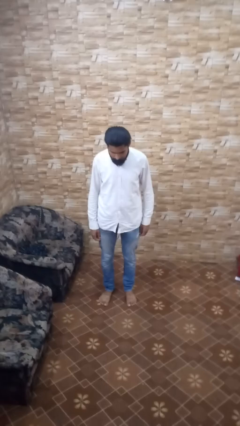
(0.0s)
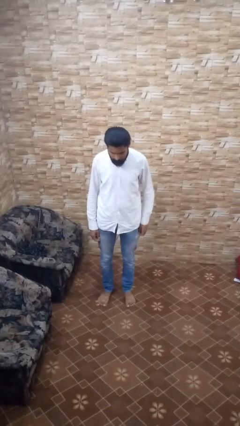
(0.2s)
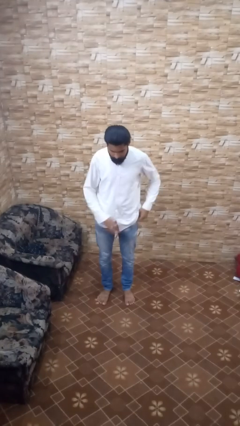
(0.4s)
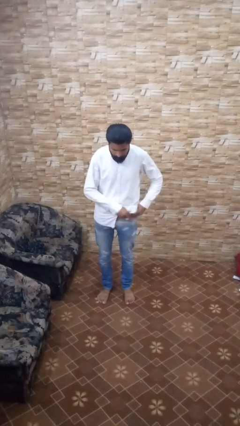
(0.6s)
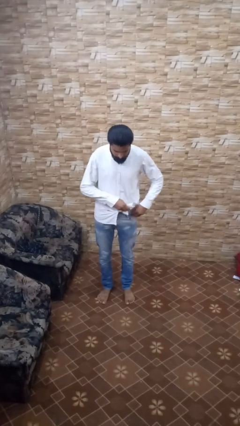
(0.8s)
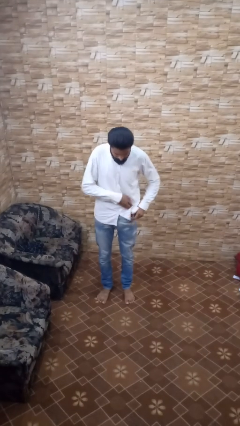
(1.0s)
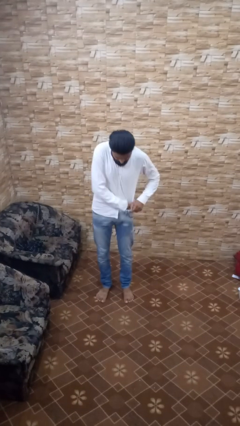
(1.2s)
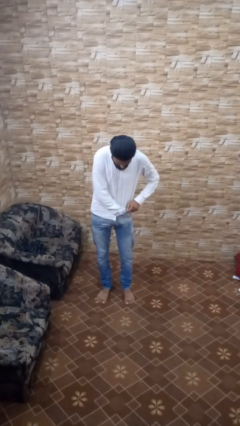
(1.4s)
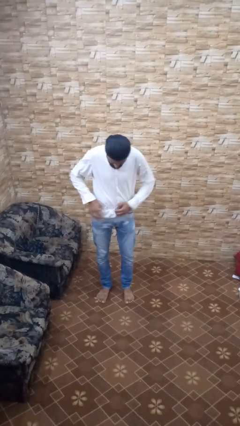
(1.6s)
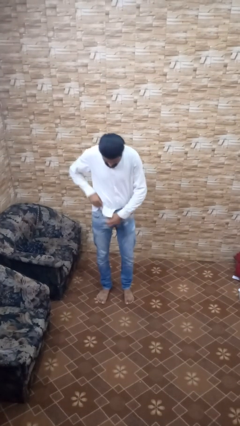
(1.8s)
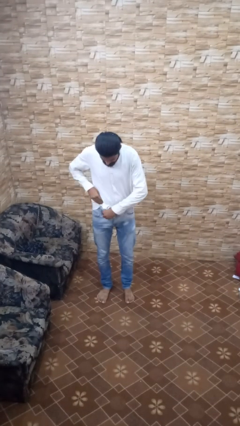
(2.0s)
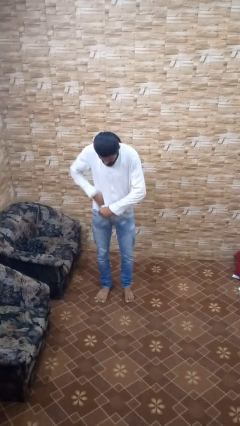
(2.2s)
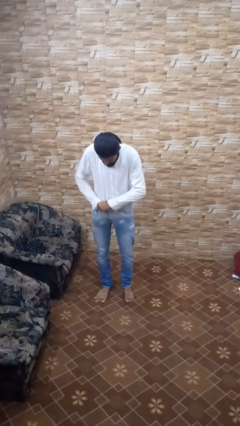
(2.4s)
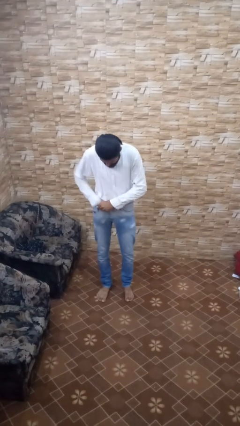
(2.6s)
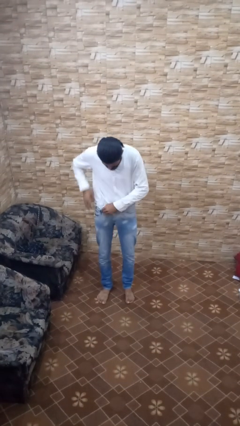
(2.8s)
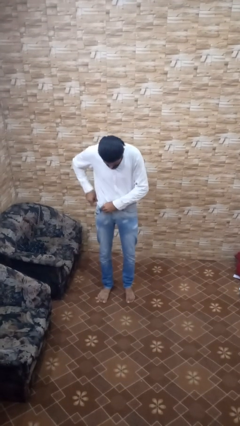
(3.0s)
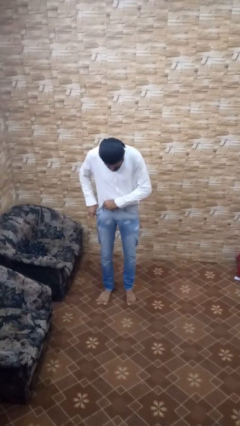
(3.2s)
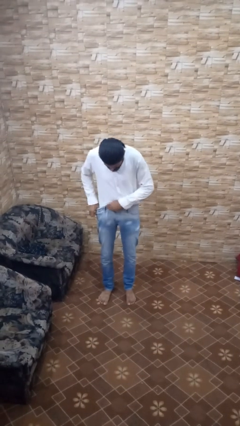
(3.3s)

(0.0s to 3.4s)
person tucks in shirt

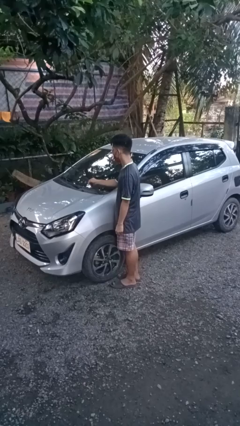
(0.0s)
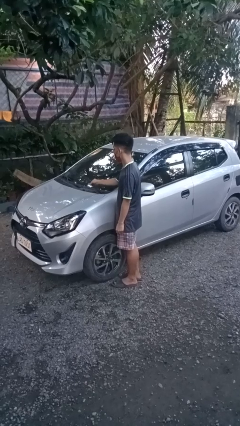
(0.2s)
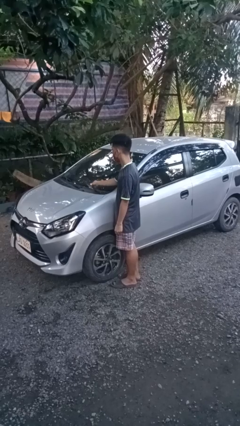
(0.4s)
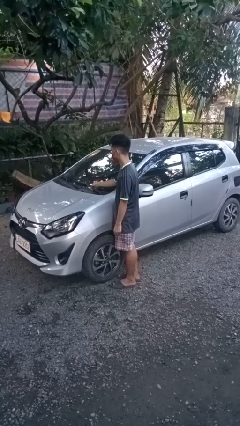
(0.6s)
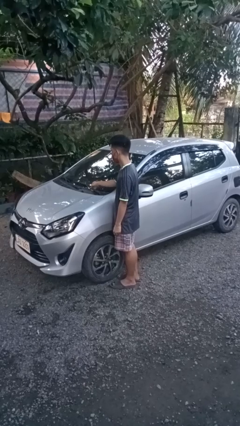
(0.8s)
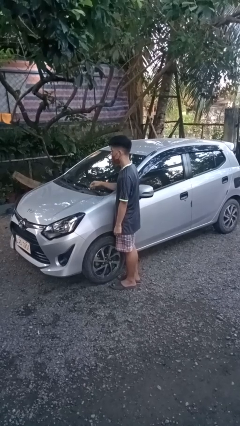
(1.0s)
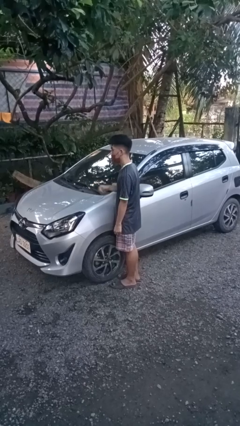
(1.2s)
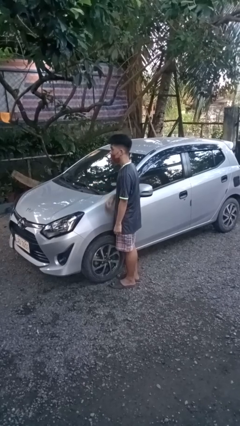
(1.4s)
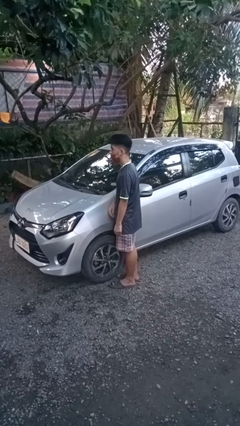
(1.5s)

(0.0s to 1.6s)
person flips down car wipers

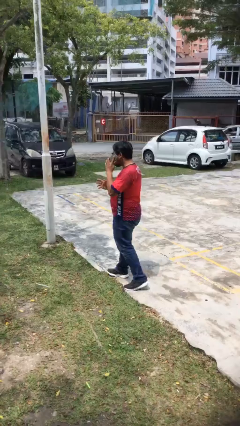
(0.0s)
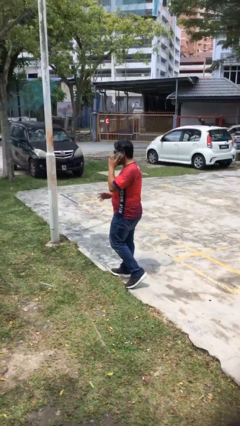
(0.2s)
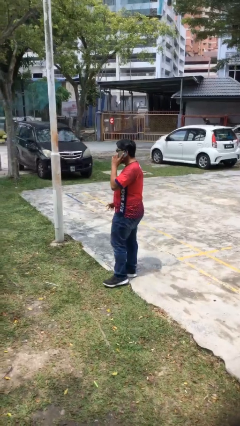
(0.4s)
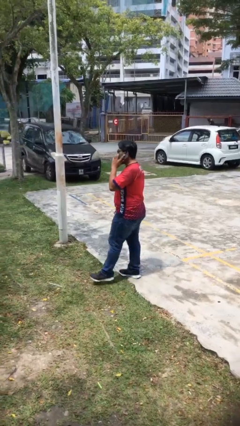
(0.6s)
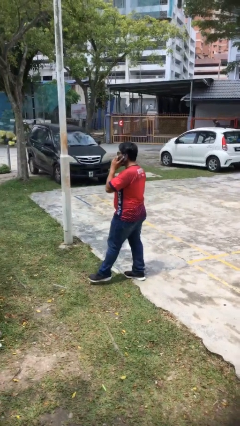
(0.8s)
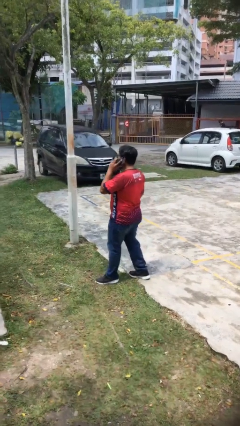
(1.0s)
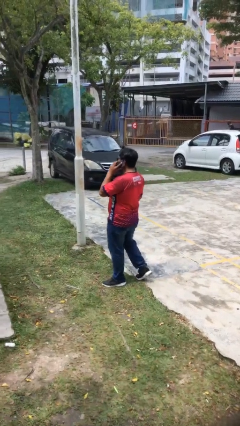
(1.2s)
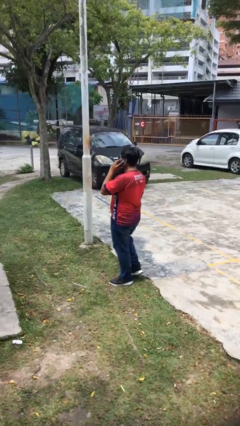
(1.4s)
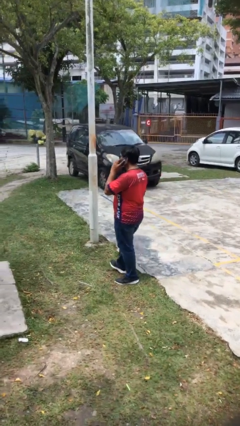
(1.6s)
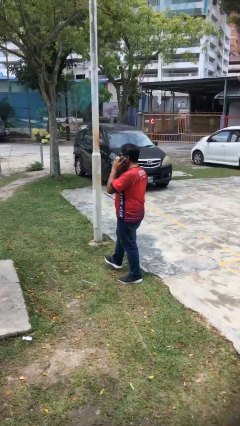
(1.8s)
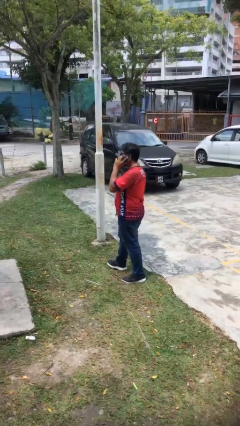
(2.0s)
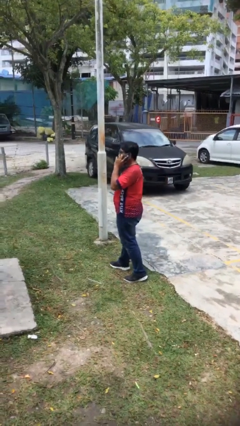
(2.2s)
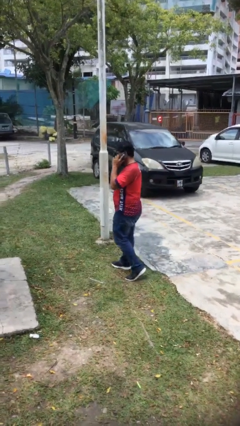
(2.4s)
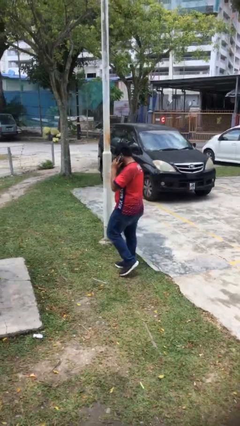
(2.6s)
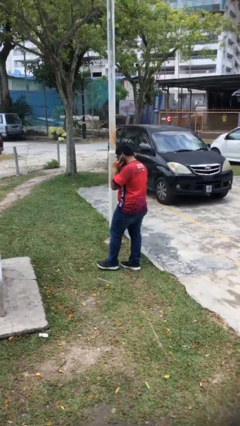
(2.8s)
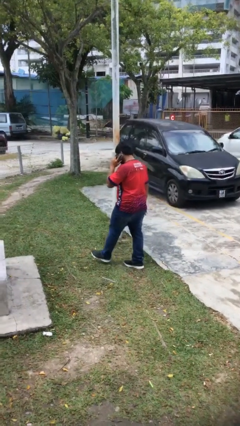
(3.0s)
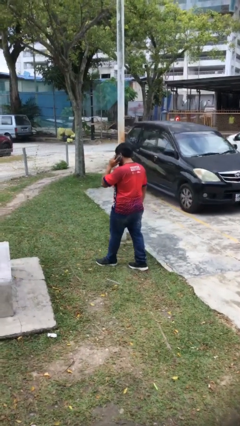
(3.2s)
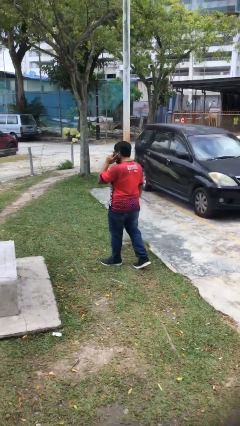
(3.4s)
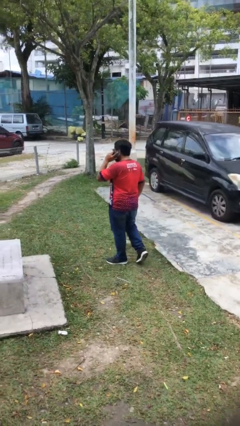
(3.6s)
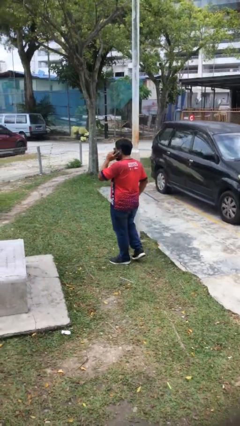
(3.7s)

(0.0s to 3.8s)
person talks on phone

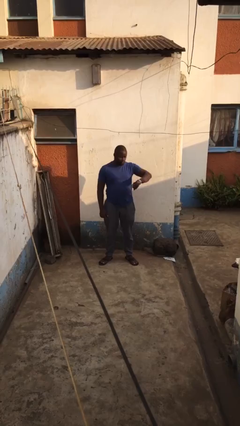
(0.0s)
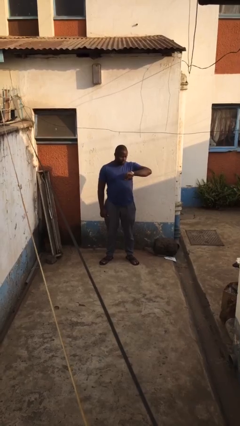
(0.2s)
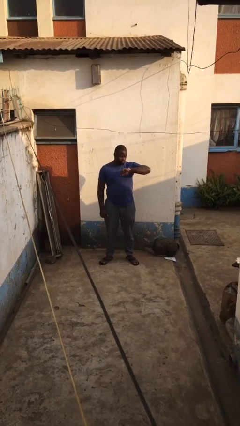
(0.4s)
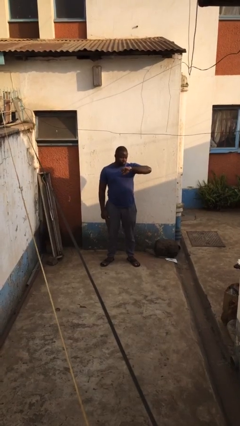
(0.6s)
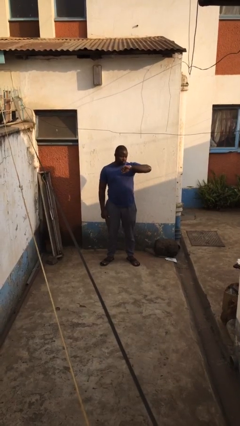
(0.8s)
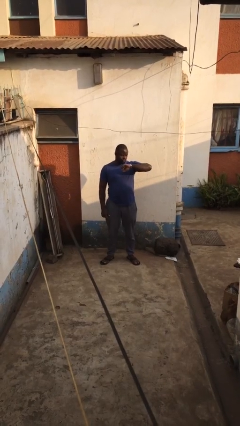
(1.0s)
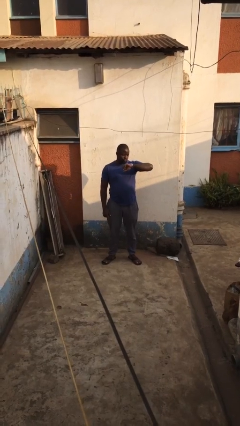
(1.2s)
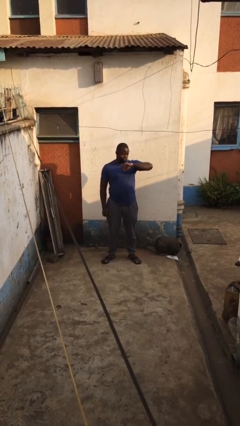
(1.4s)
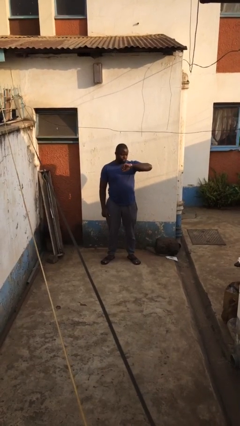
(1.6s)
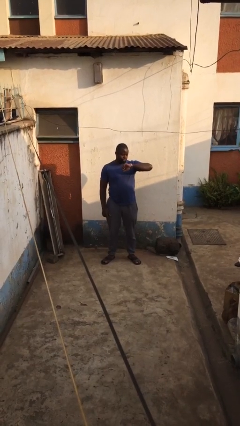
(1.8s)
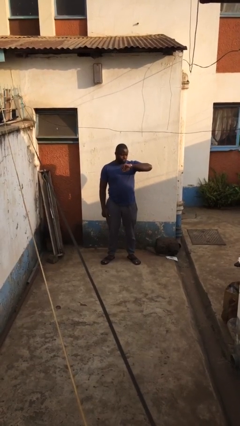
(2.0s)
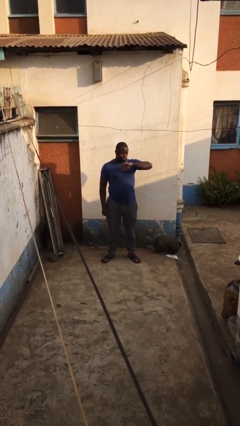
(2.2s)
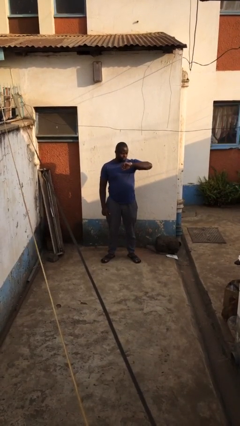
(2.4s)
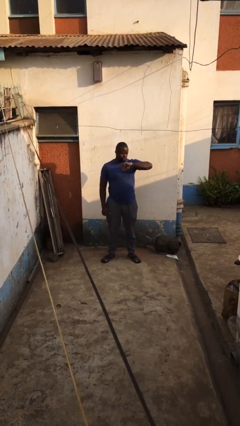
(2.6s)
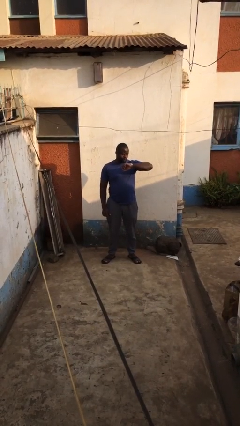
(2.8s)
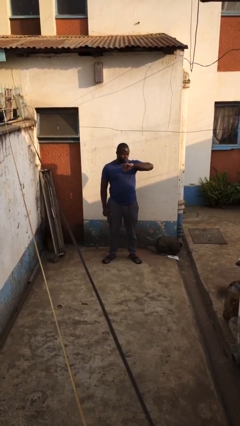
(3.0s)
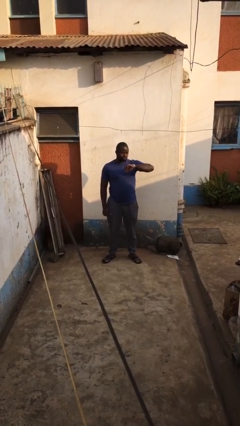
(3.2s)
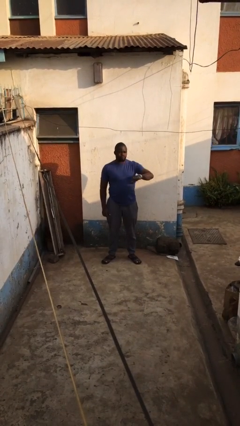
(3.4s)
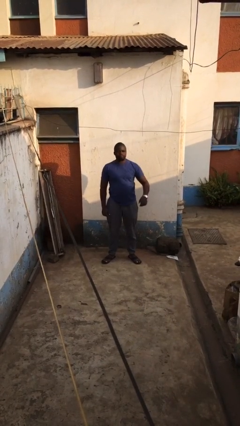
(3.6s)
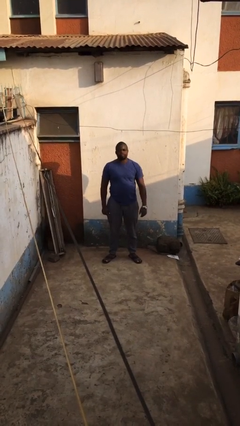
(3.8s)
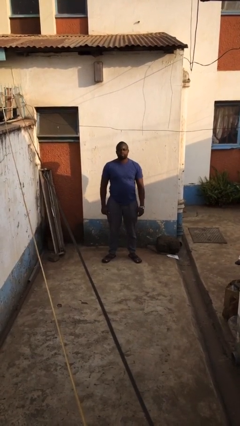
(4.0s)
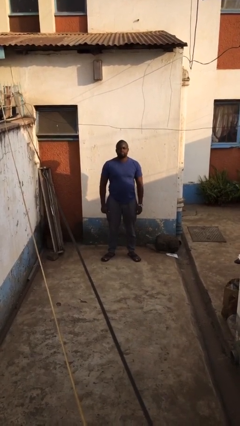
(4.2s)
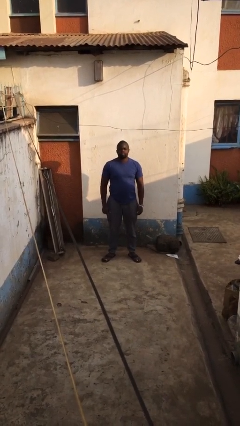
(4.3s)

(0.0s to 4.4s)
person looks at wristwatch

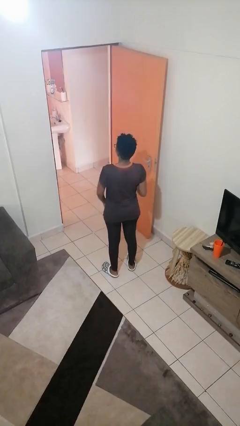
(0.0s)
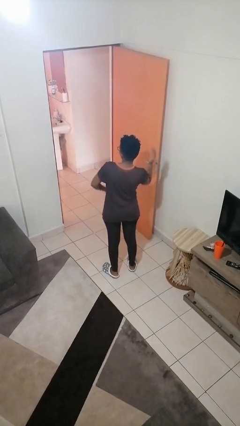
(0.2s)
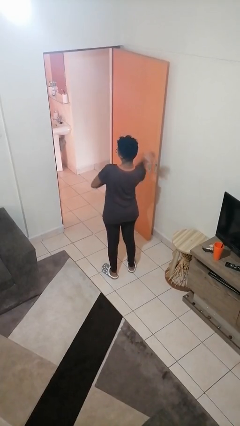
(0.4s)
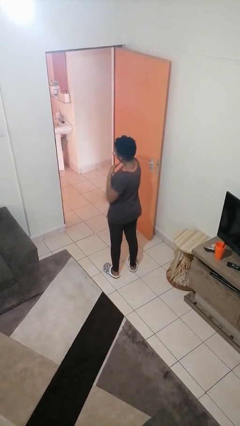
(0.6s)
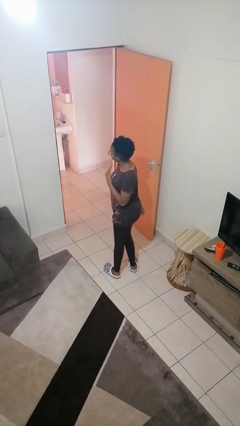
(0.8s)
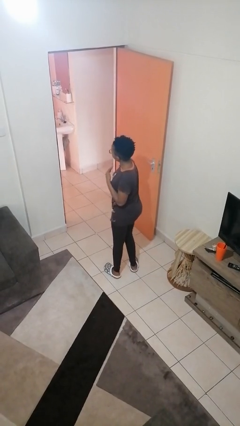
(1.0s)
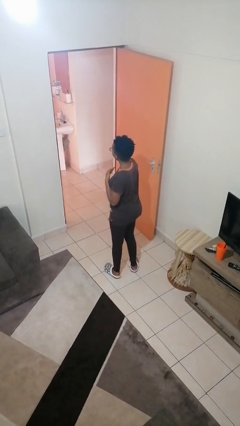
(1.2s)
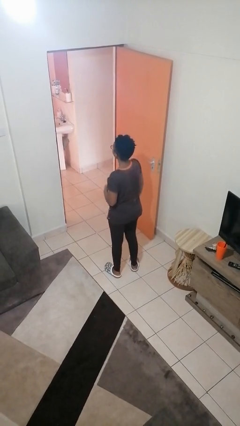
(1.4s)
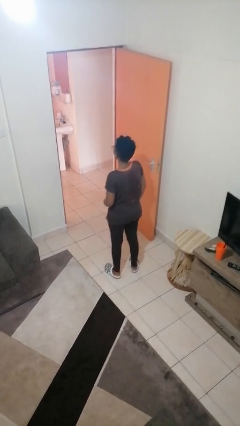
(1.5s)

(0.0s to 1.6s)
person karate chop

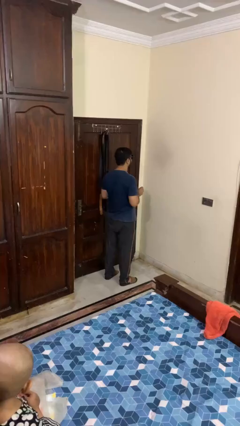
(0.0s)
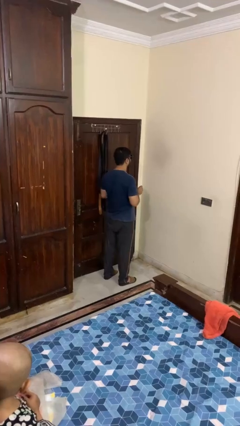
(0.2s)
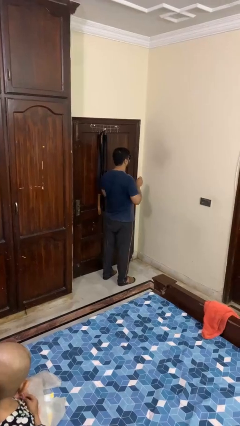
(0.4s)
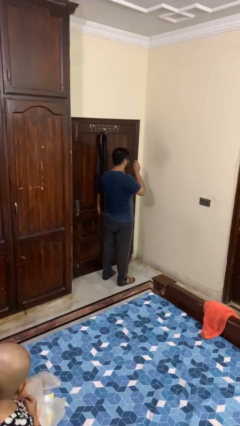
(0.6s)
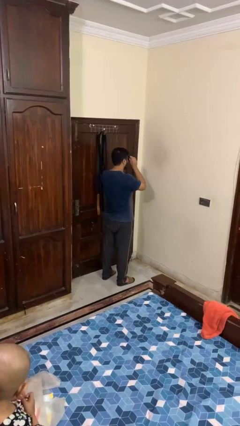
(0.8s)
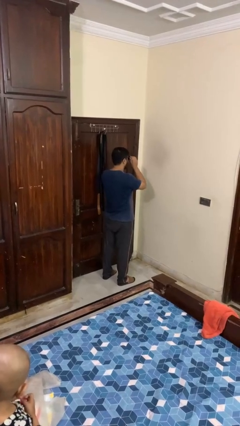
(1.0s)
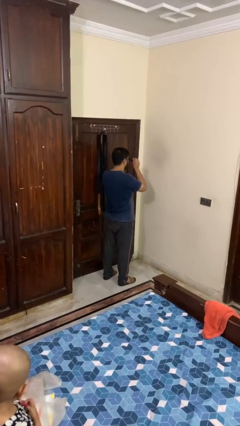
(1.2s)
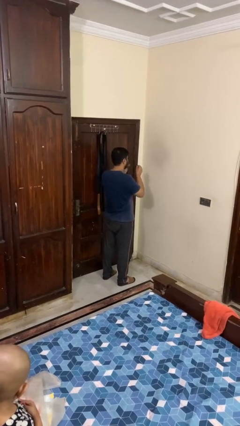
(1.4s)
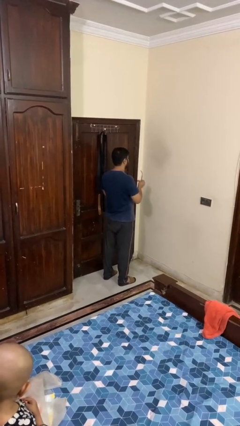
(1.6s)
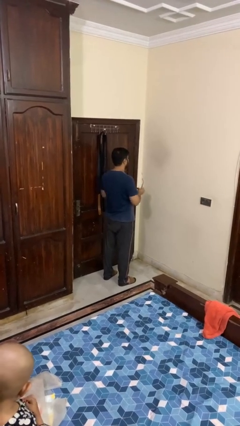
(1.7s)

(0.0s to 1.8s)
person takes off sunglasses

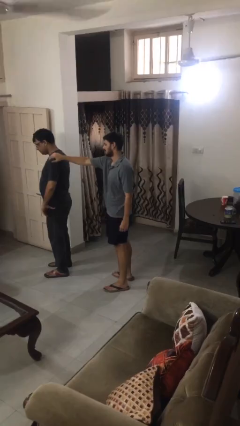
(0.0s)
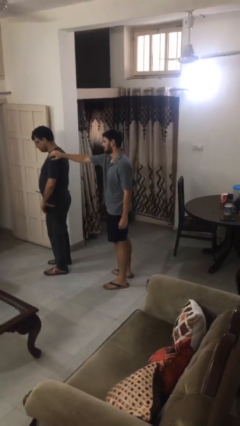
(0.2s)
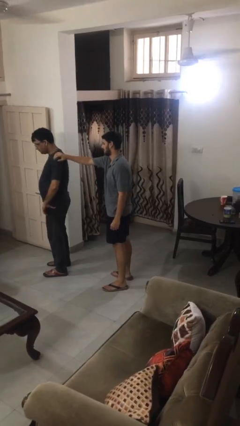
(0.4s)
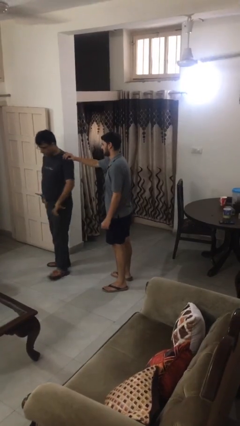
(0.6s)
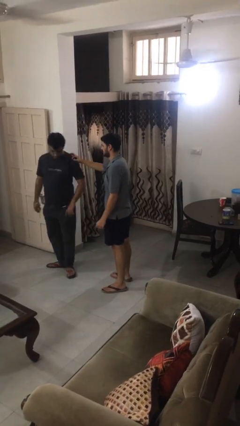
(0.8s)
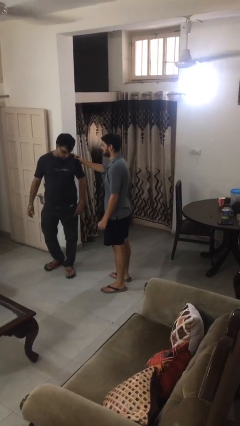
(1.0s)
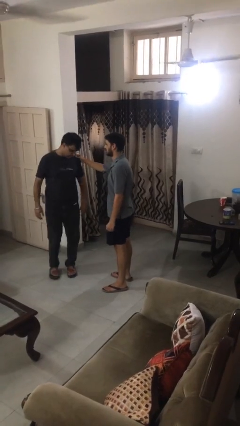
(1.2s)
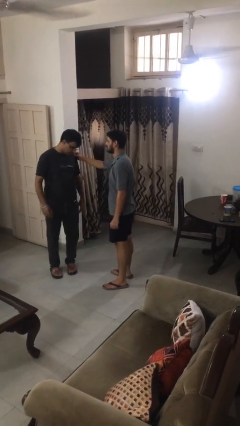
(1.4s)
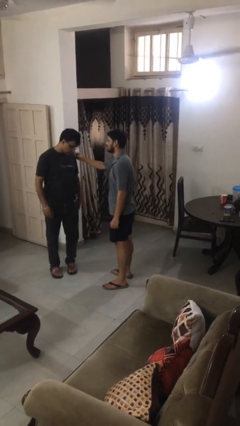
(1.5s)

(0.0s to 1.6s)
person spins person around
